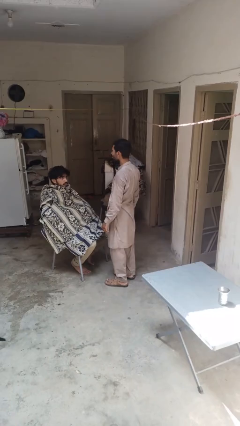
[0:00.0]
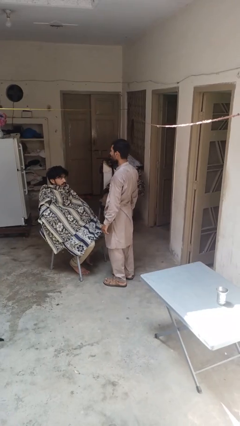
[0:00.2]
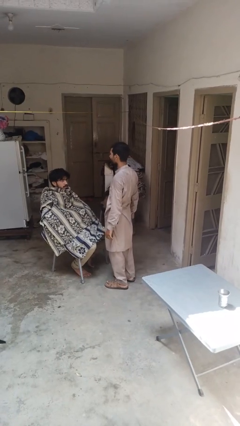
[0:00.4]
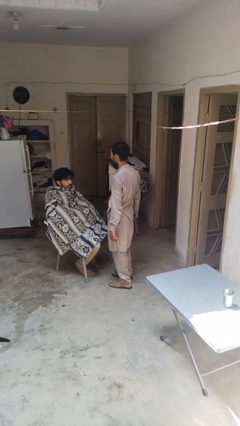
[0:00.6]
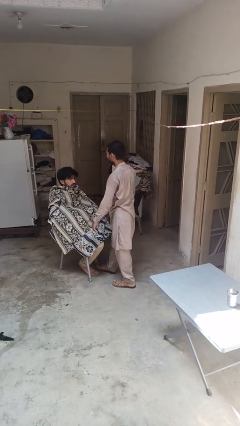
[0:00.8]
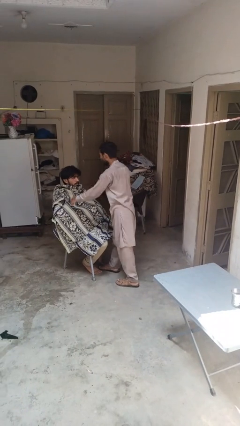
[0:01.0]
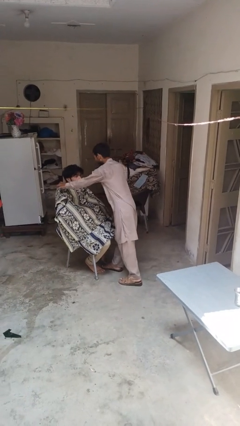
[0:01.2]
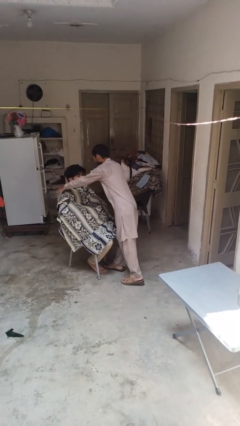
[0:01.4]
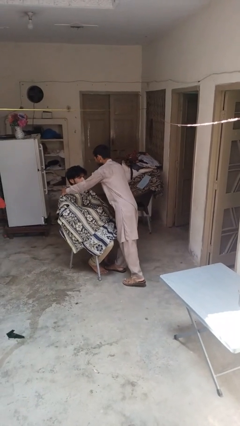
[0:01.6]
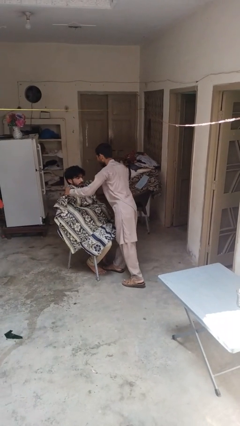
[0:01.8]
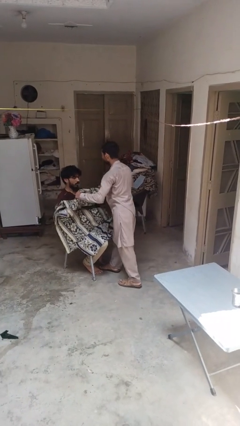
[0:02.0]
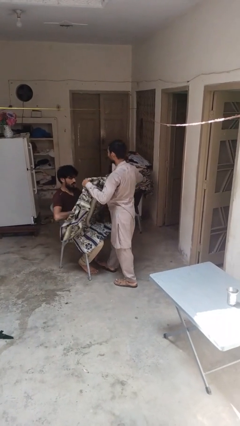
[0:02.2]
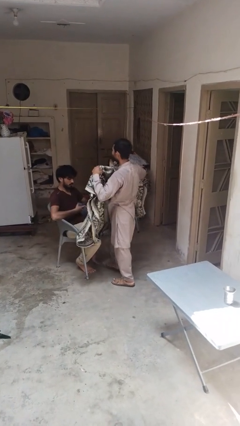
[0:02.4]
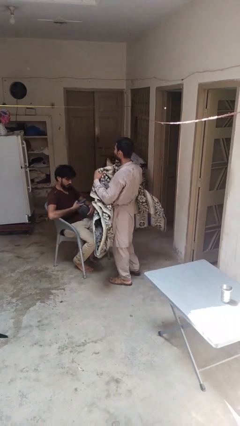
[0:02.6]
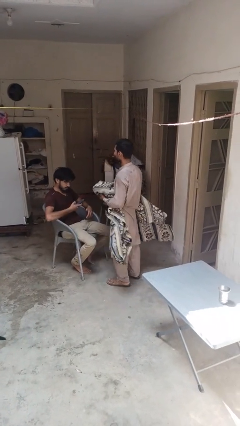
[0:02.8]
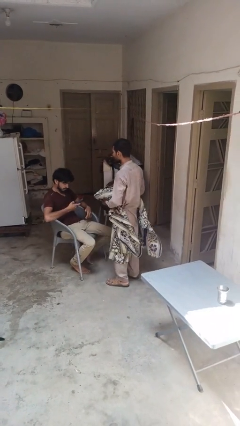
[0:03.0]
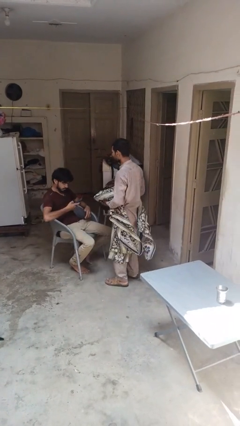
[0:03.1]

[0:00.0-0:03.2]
person uncovers friend with blanket

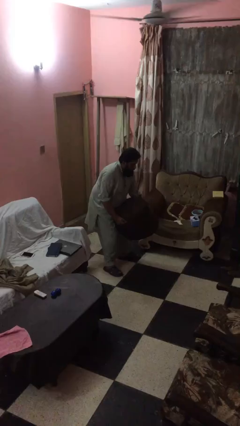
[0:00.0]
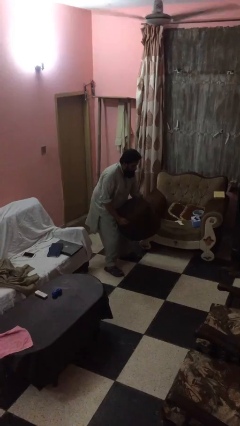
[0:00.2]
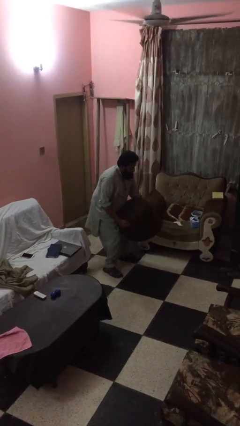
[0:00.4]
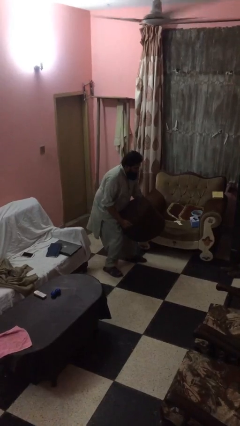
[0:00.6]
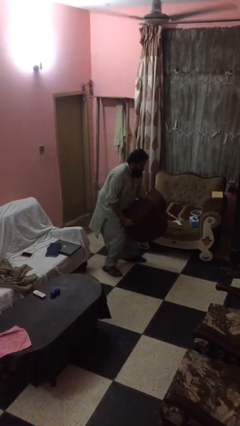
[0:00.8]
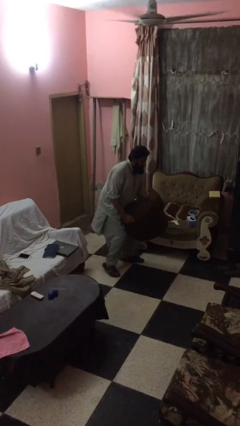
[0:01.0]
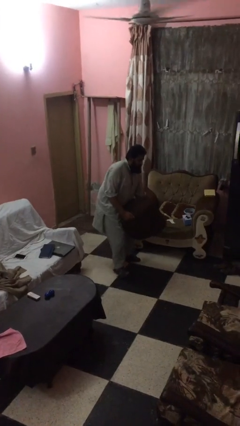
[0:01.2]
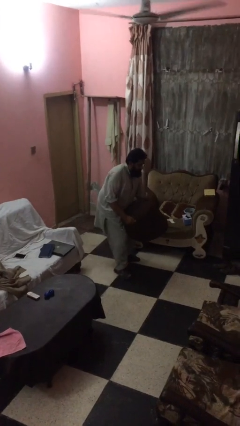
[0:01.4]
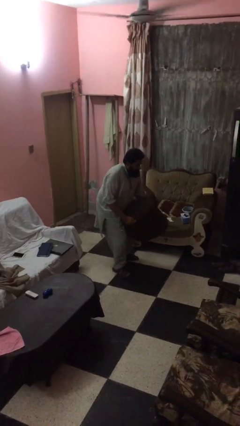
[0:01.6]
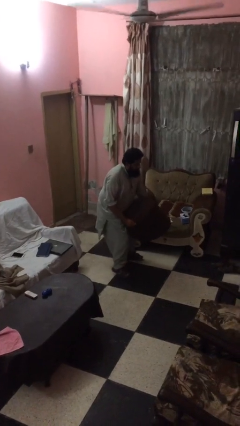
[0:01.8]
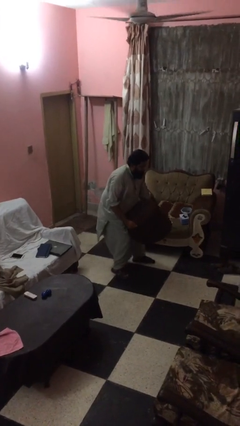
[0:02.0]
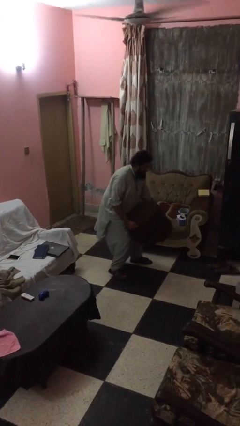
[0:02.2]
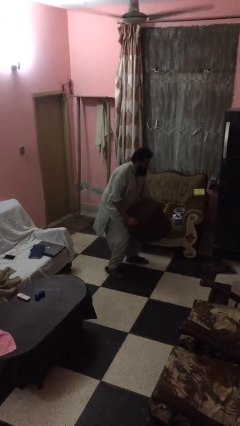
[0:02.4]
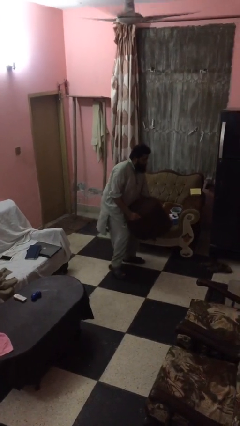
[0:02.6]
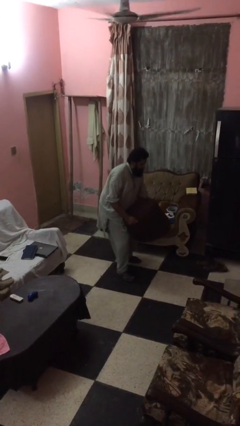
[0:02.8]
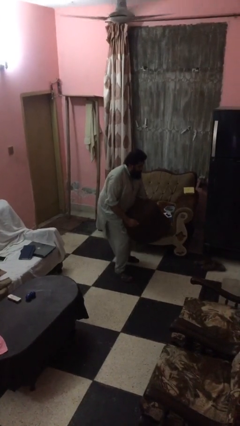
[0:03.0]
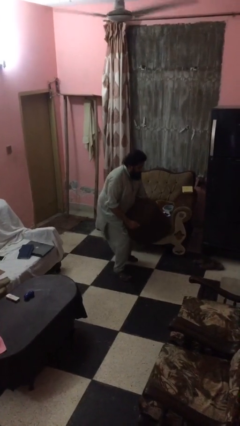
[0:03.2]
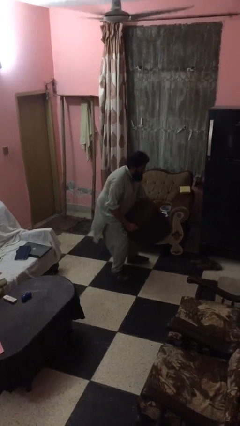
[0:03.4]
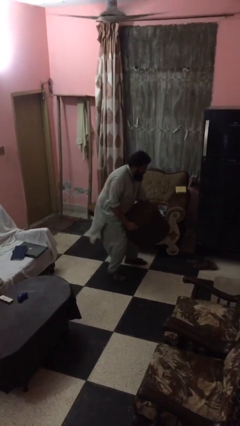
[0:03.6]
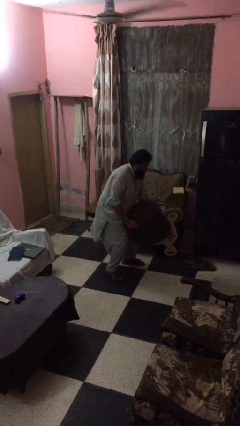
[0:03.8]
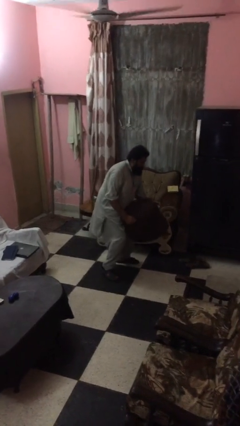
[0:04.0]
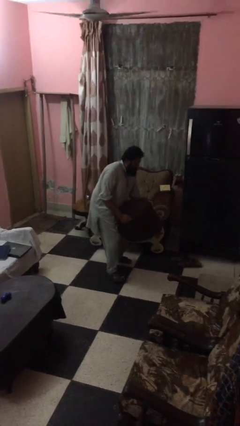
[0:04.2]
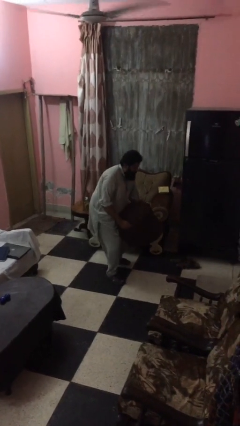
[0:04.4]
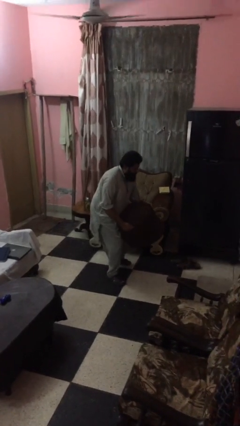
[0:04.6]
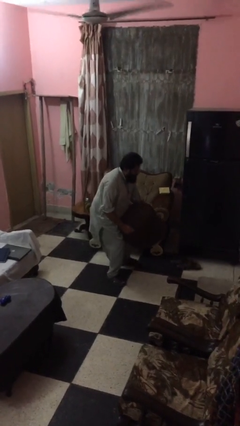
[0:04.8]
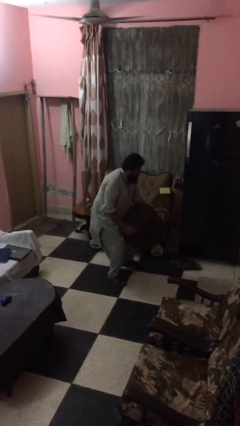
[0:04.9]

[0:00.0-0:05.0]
person carries heavy object

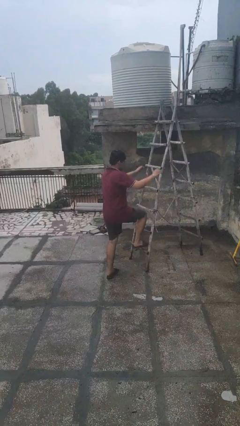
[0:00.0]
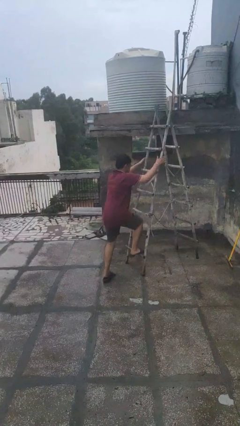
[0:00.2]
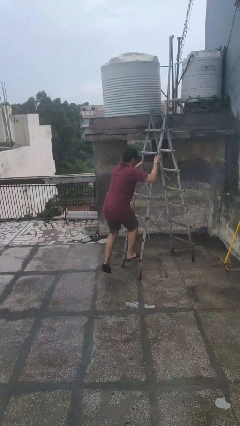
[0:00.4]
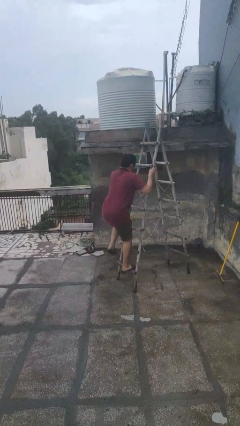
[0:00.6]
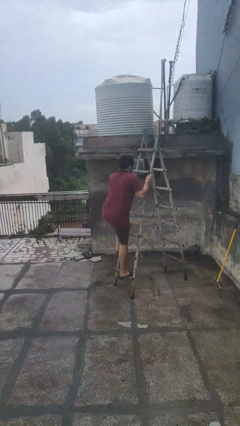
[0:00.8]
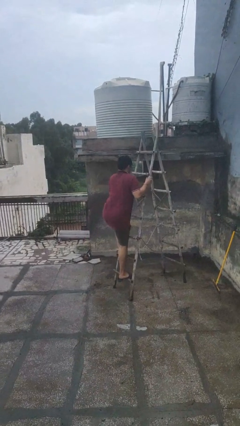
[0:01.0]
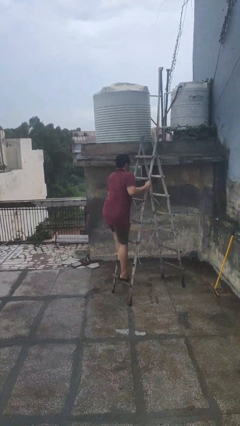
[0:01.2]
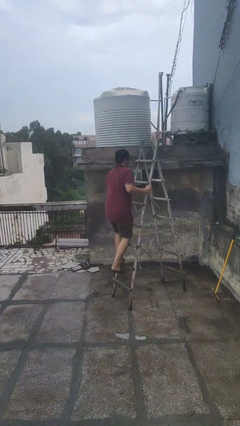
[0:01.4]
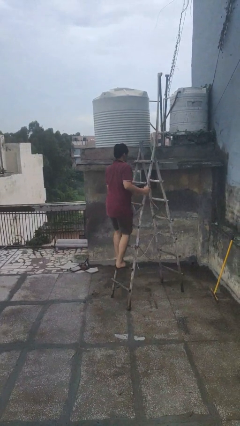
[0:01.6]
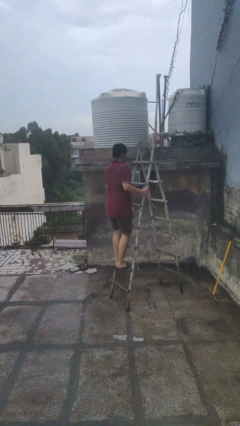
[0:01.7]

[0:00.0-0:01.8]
person climbs up ladder

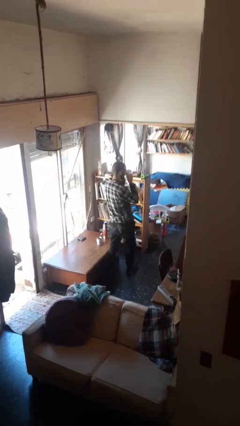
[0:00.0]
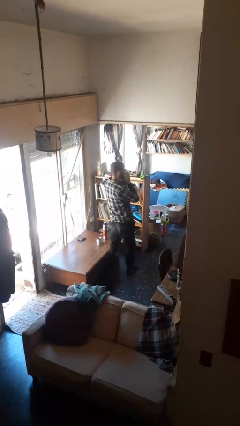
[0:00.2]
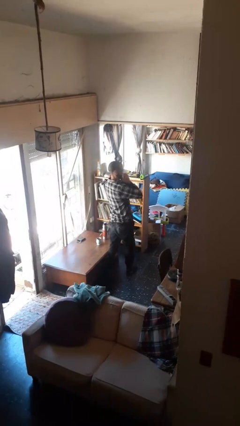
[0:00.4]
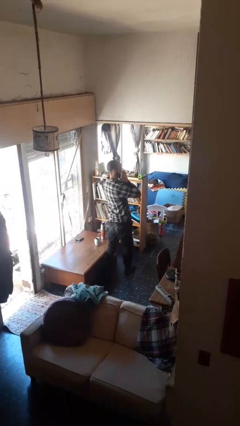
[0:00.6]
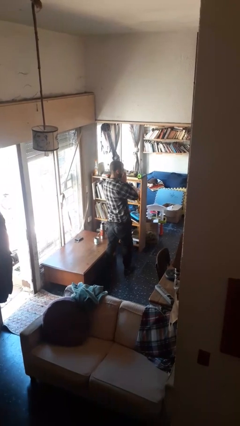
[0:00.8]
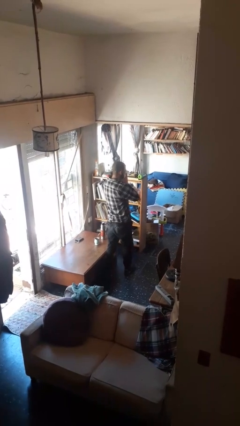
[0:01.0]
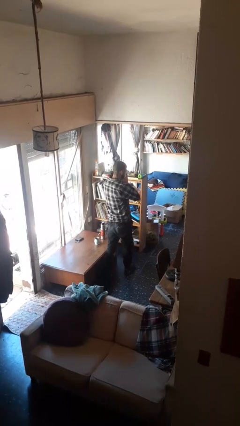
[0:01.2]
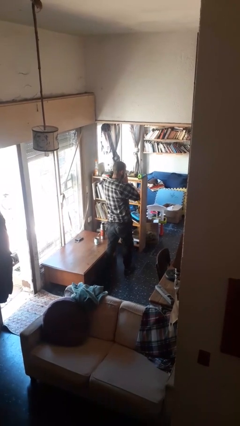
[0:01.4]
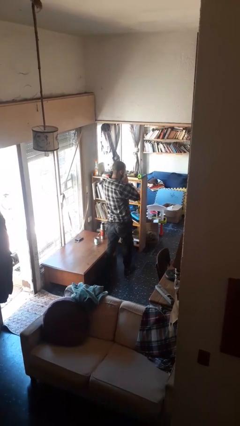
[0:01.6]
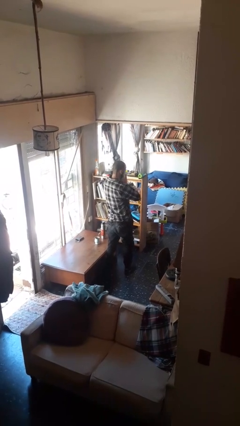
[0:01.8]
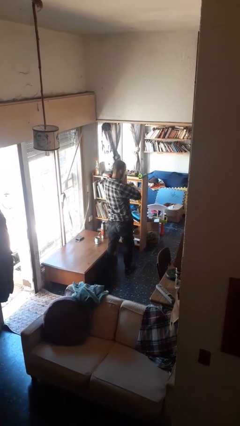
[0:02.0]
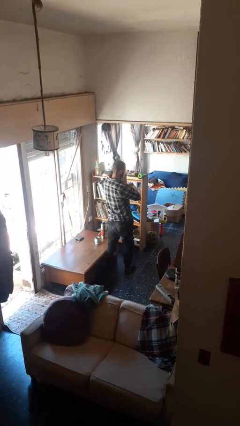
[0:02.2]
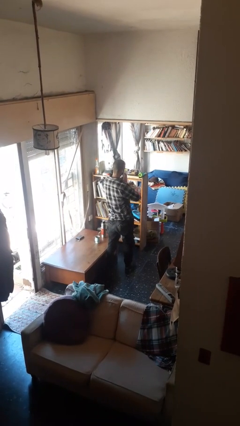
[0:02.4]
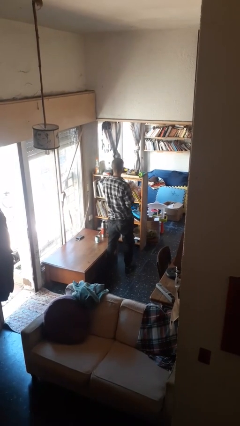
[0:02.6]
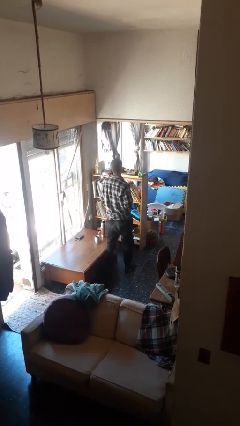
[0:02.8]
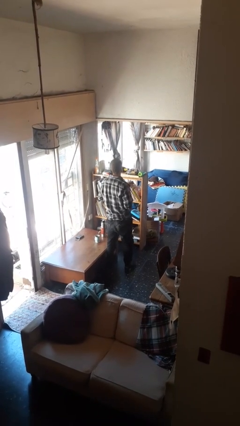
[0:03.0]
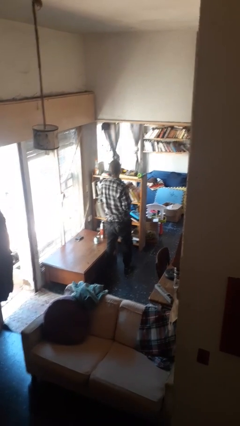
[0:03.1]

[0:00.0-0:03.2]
person blows nose

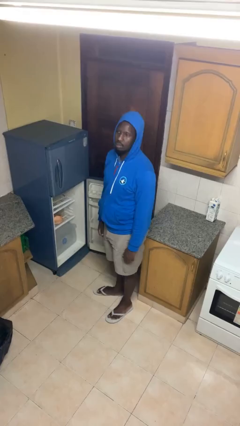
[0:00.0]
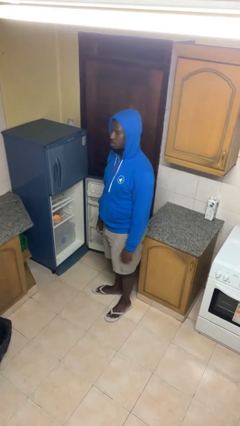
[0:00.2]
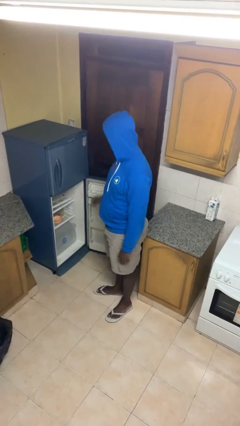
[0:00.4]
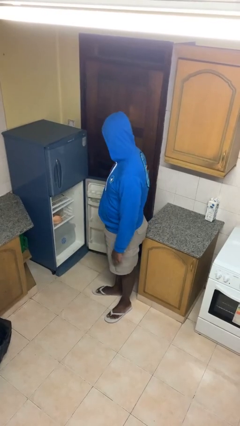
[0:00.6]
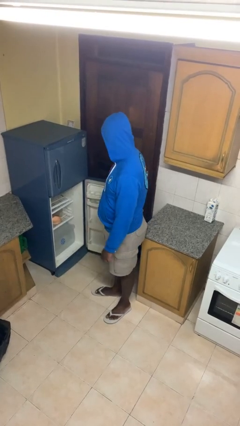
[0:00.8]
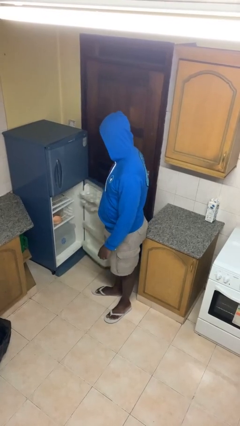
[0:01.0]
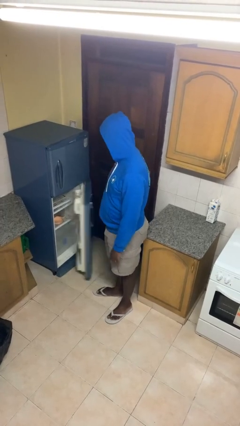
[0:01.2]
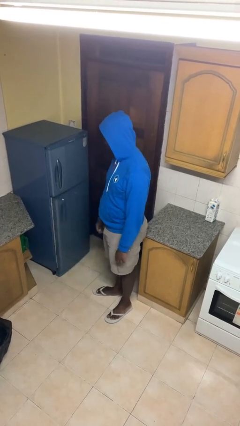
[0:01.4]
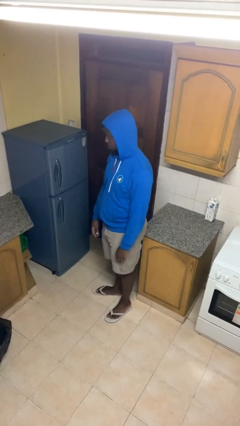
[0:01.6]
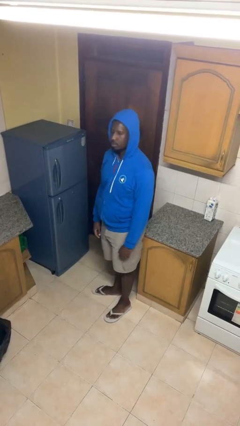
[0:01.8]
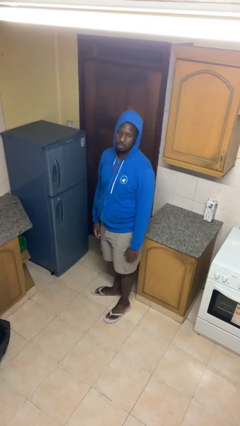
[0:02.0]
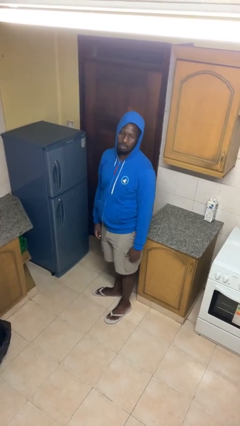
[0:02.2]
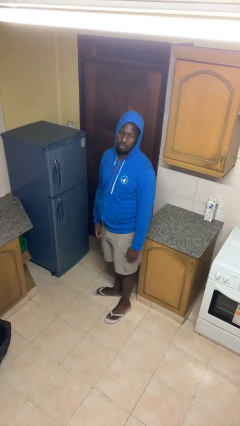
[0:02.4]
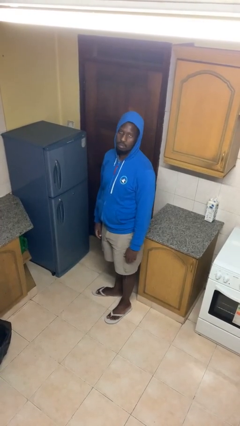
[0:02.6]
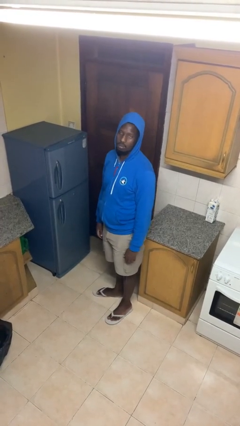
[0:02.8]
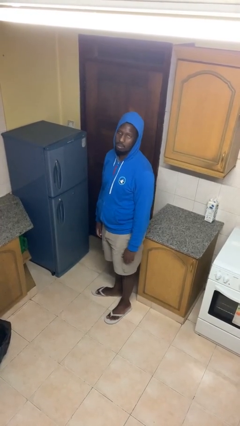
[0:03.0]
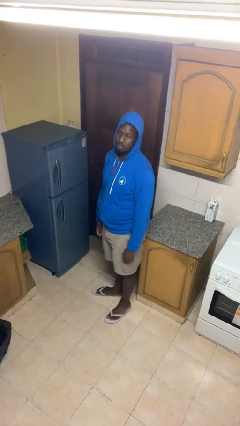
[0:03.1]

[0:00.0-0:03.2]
person closes refrigerator

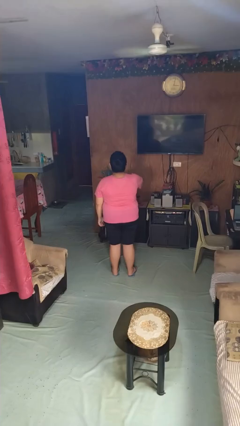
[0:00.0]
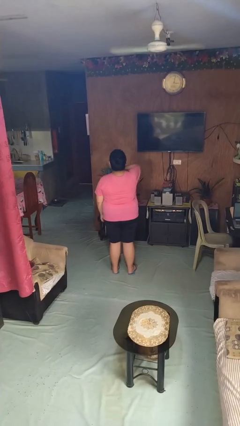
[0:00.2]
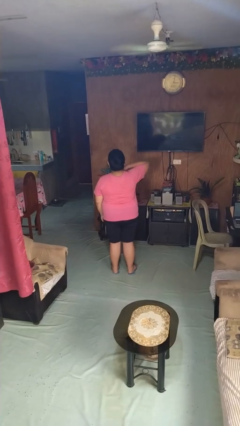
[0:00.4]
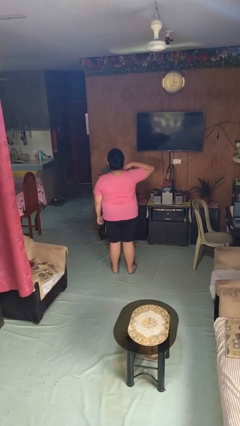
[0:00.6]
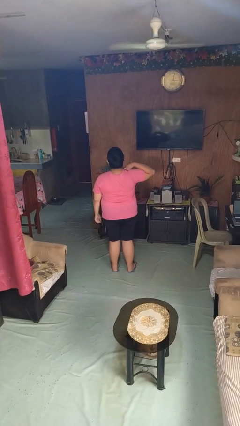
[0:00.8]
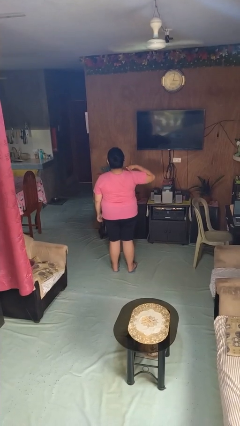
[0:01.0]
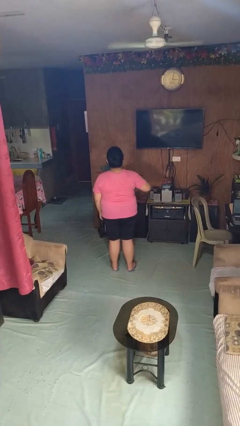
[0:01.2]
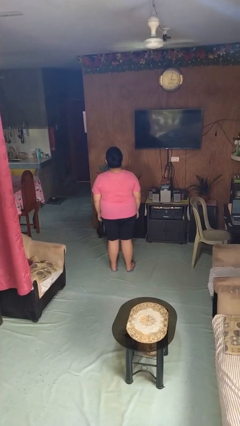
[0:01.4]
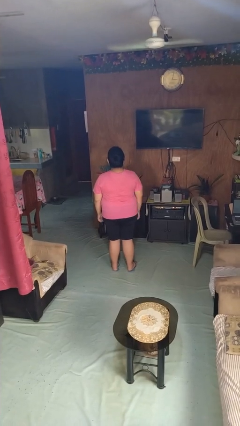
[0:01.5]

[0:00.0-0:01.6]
person gestures cut
